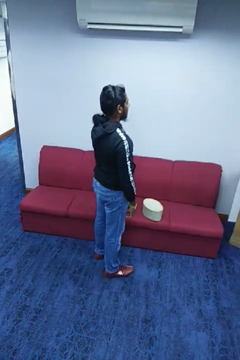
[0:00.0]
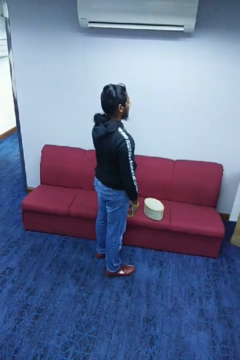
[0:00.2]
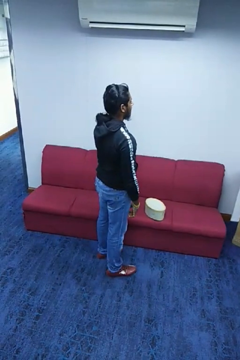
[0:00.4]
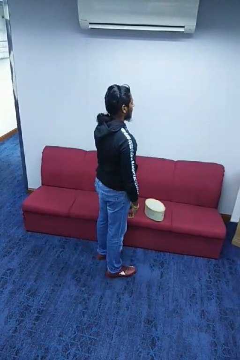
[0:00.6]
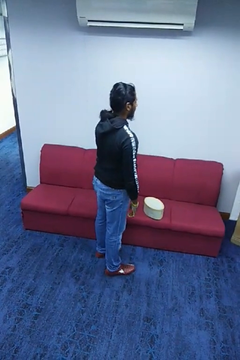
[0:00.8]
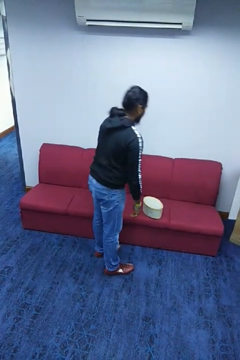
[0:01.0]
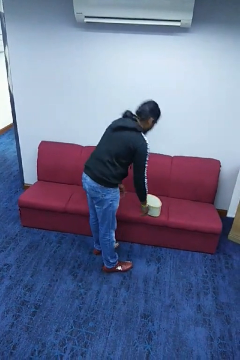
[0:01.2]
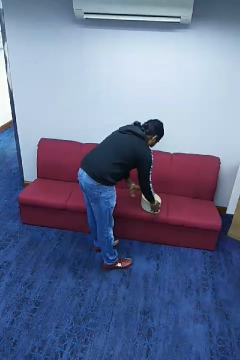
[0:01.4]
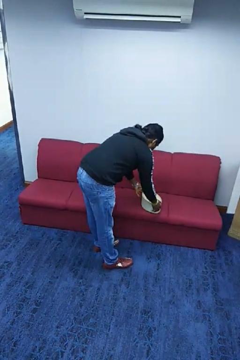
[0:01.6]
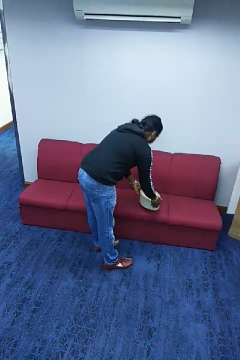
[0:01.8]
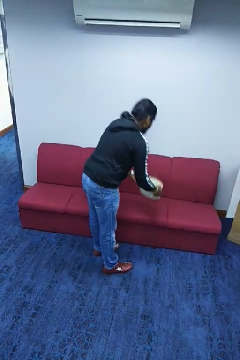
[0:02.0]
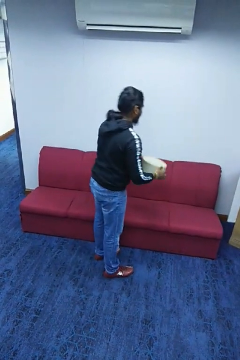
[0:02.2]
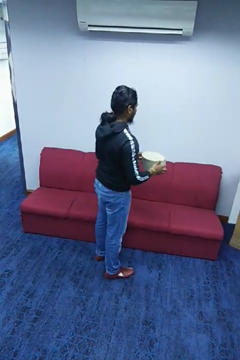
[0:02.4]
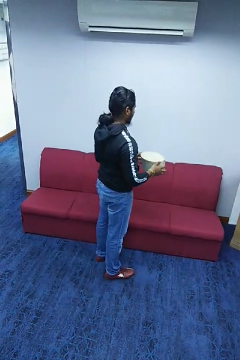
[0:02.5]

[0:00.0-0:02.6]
person picks up object from couch

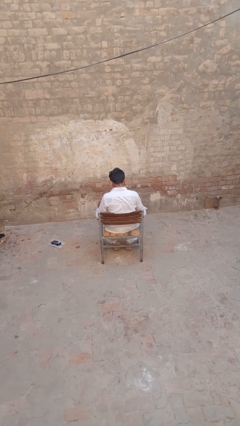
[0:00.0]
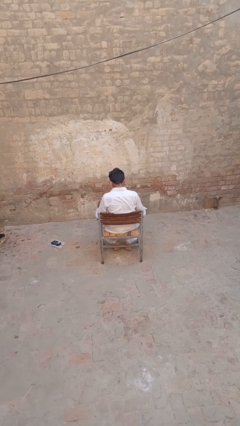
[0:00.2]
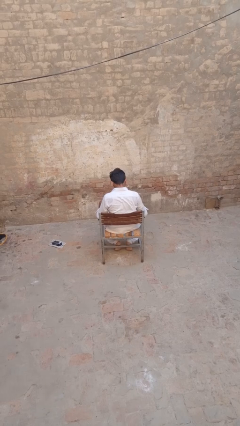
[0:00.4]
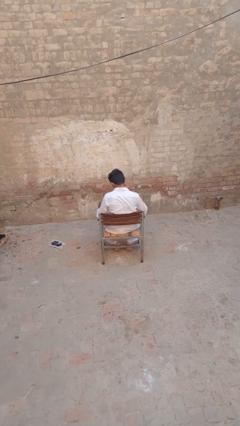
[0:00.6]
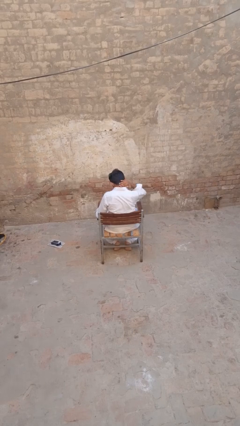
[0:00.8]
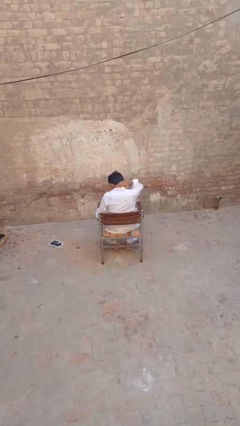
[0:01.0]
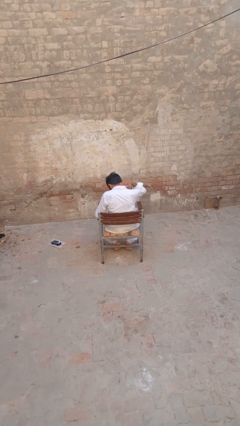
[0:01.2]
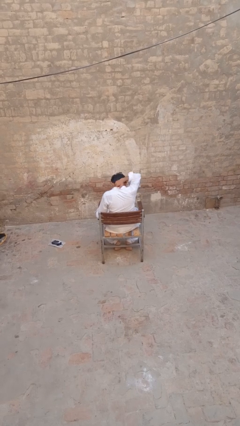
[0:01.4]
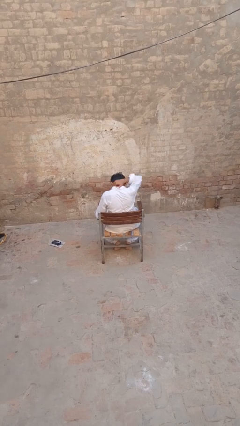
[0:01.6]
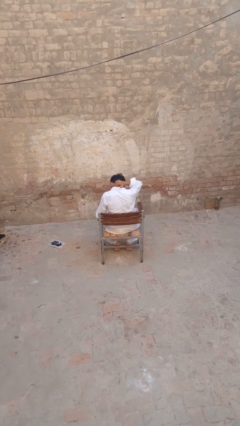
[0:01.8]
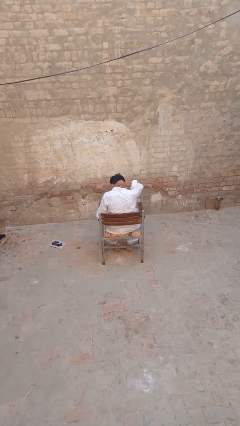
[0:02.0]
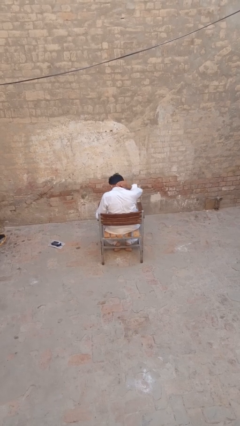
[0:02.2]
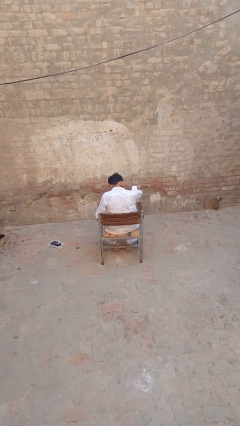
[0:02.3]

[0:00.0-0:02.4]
person rubs neck

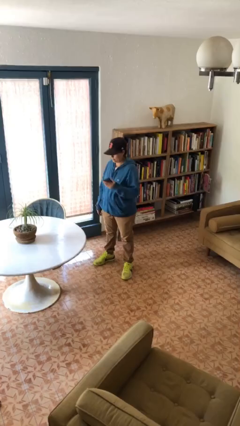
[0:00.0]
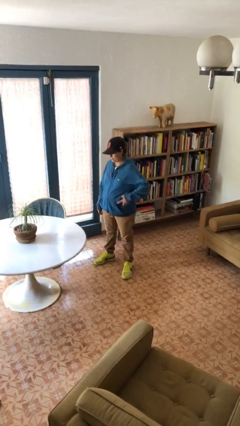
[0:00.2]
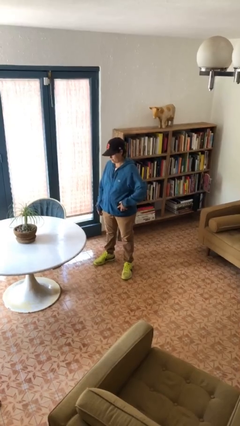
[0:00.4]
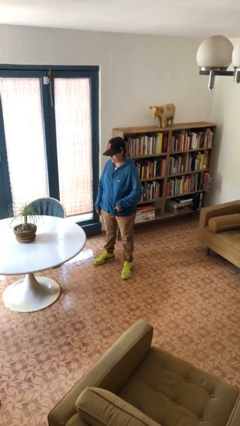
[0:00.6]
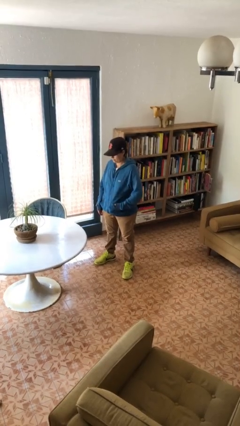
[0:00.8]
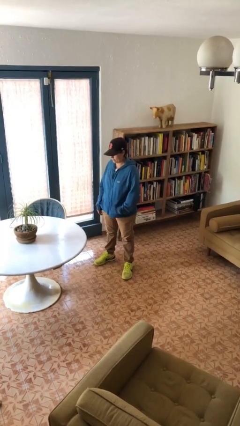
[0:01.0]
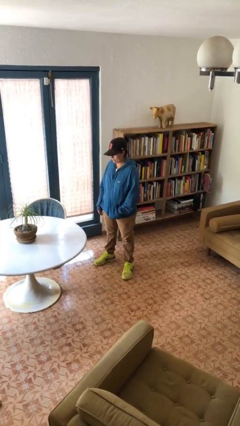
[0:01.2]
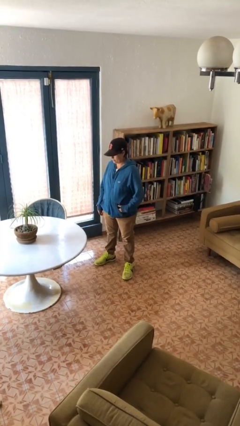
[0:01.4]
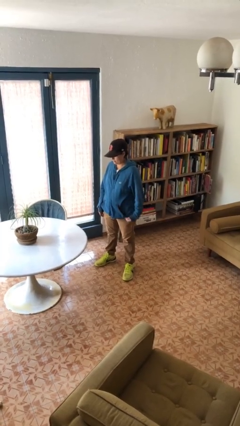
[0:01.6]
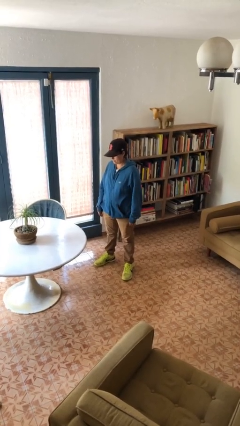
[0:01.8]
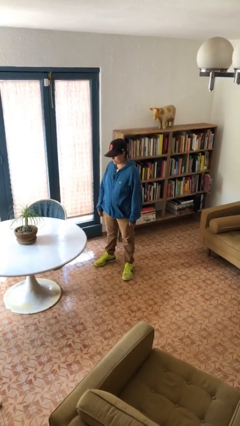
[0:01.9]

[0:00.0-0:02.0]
person puts phone into pocket

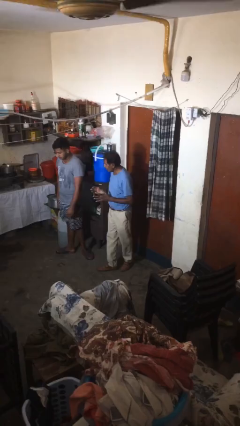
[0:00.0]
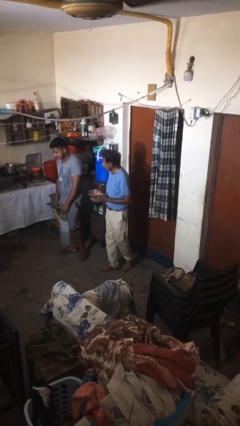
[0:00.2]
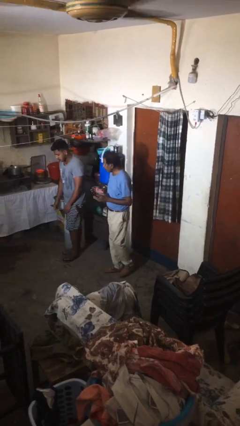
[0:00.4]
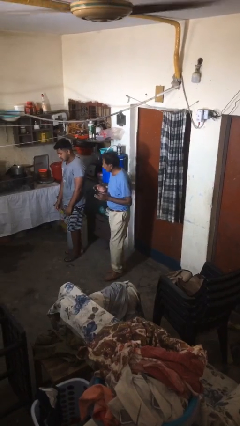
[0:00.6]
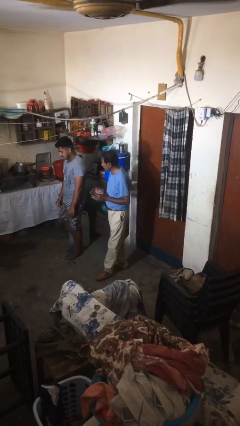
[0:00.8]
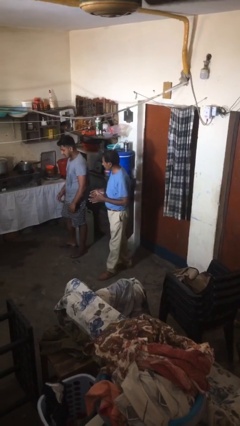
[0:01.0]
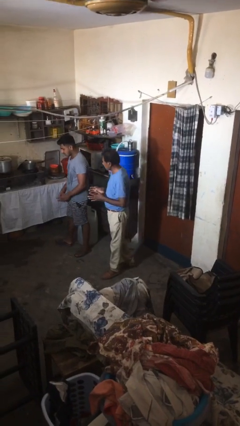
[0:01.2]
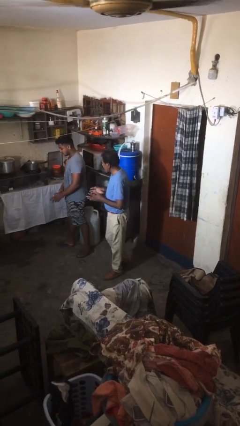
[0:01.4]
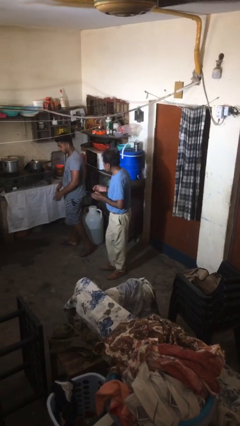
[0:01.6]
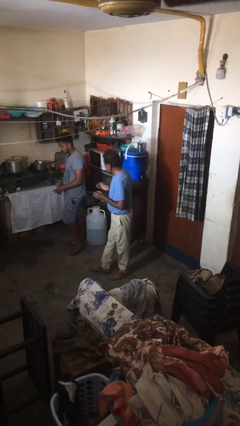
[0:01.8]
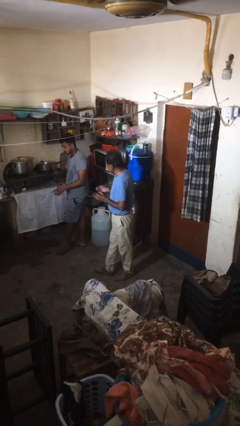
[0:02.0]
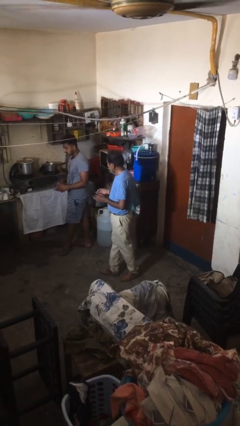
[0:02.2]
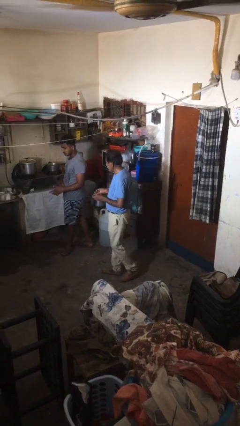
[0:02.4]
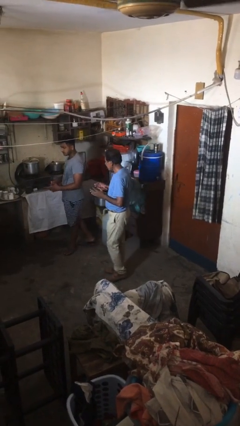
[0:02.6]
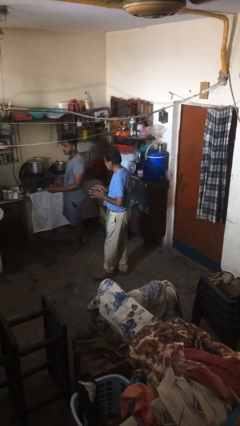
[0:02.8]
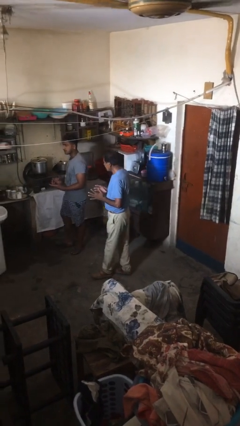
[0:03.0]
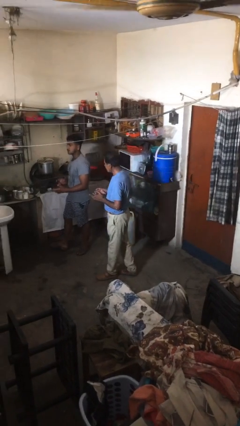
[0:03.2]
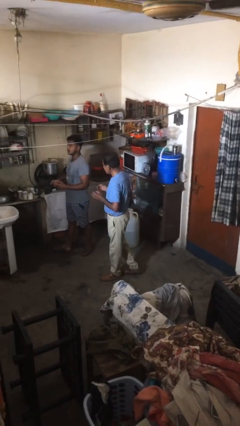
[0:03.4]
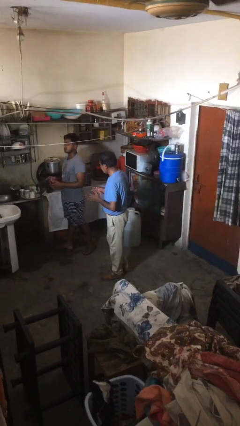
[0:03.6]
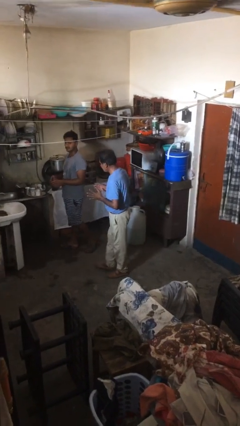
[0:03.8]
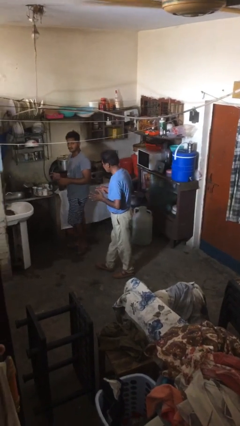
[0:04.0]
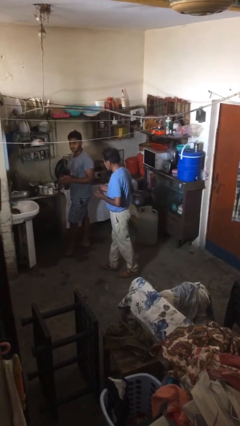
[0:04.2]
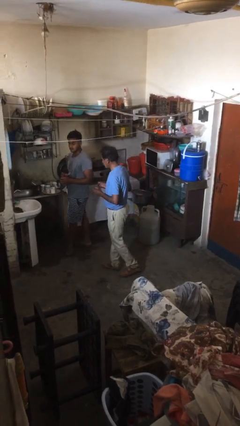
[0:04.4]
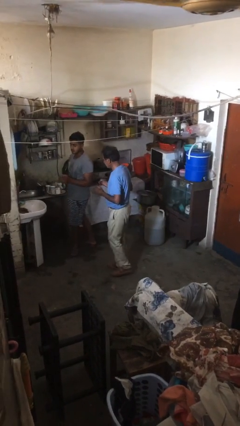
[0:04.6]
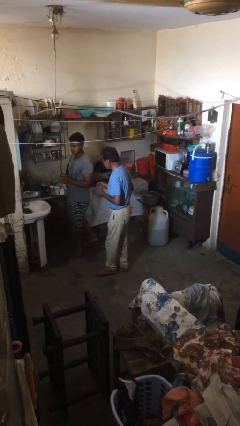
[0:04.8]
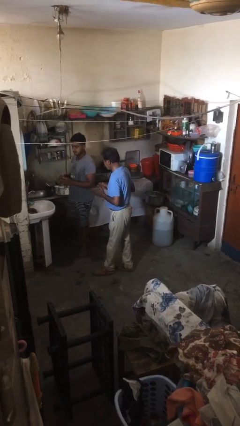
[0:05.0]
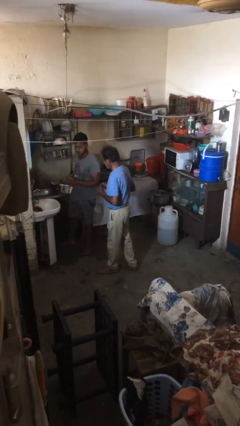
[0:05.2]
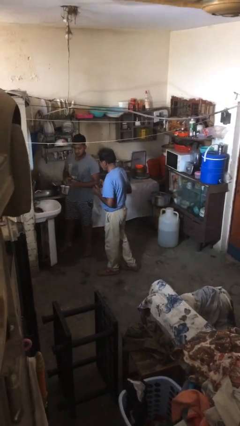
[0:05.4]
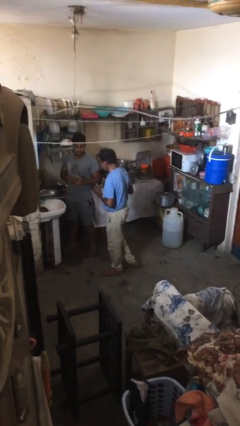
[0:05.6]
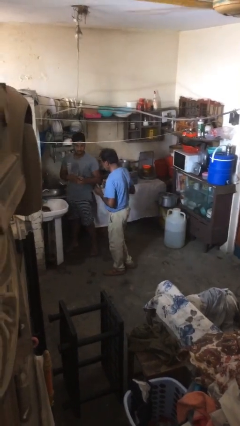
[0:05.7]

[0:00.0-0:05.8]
person talks to person

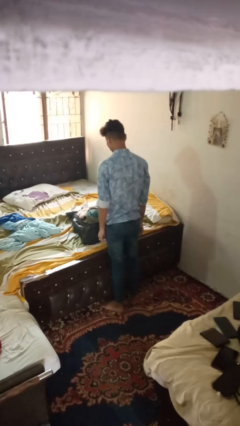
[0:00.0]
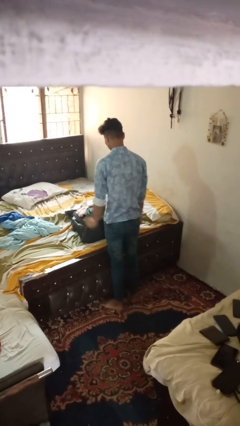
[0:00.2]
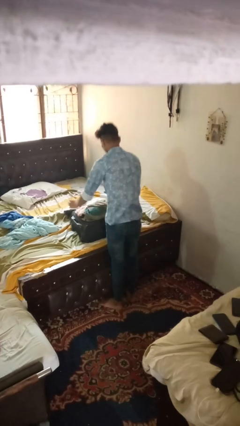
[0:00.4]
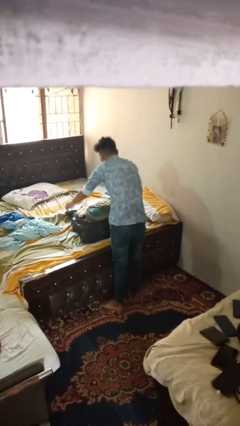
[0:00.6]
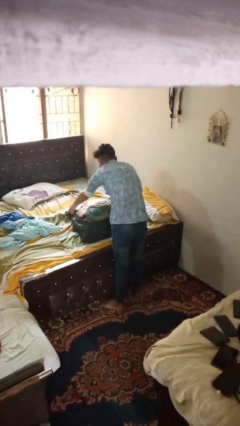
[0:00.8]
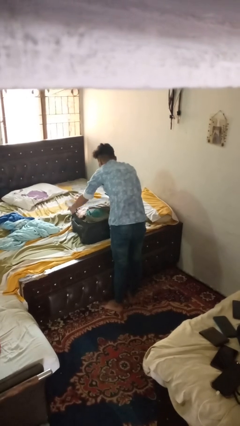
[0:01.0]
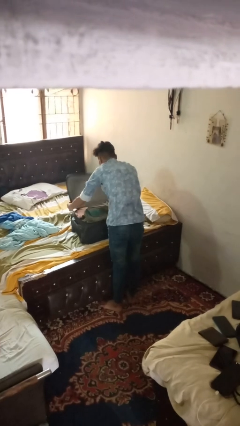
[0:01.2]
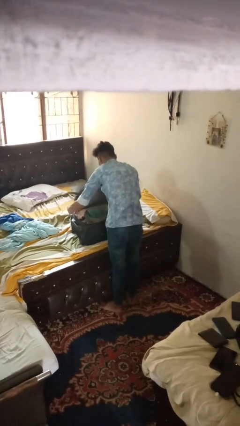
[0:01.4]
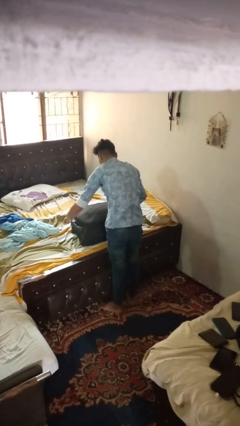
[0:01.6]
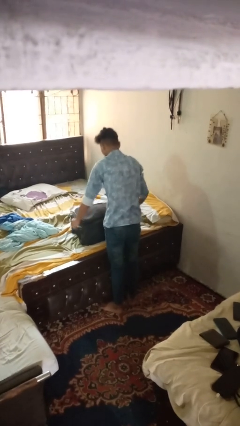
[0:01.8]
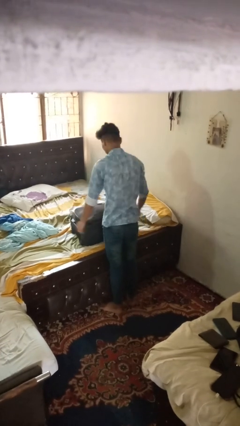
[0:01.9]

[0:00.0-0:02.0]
person closes suitcase

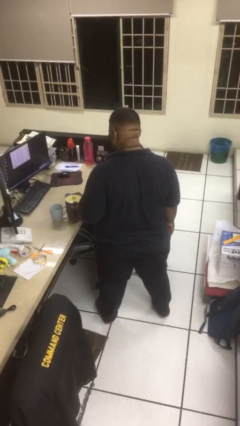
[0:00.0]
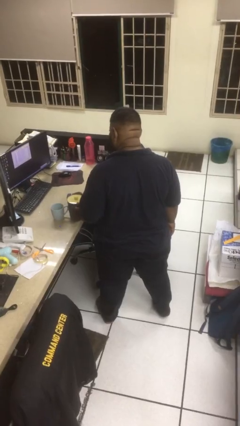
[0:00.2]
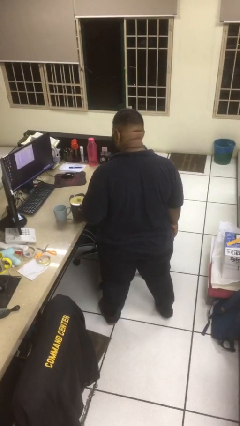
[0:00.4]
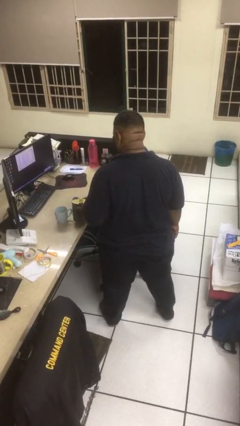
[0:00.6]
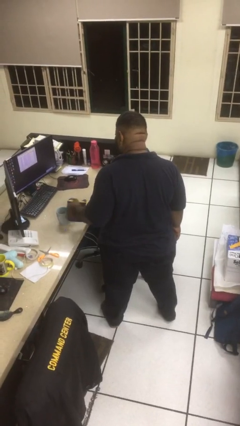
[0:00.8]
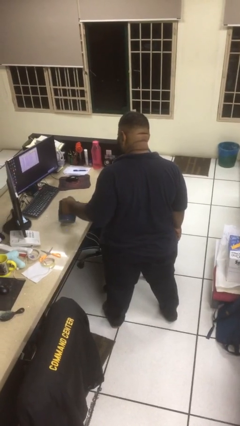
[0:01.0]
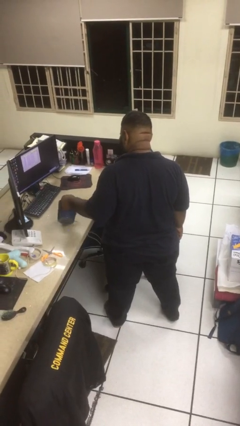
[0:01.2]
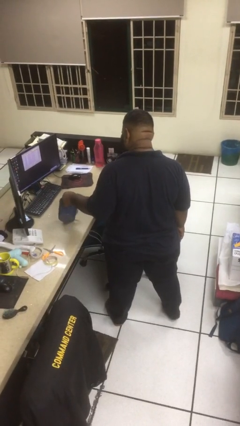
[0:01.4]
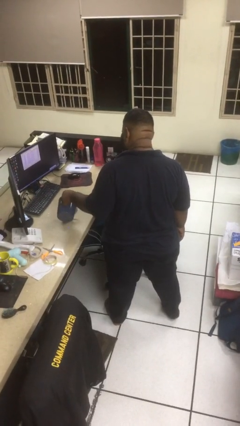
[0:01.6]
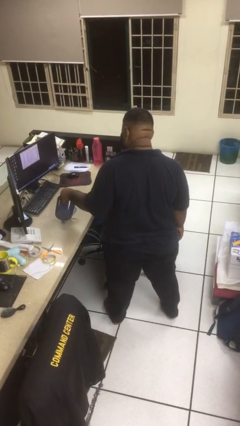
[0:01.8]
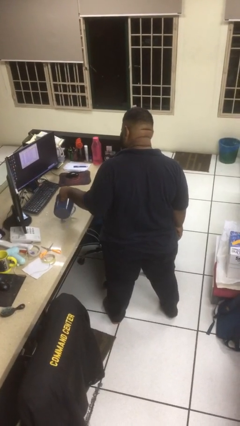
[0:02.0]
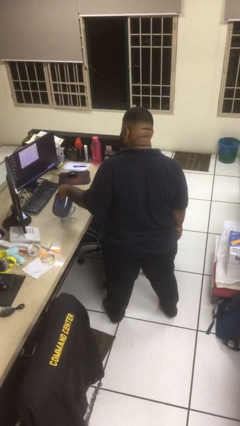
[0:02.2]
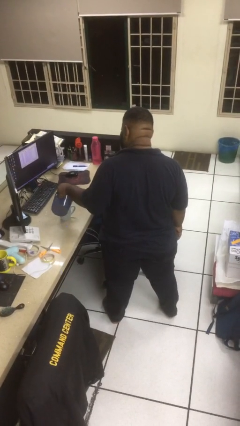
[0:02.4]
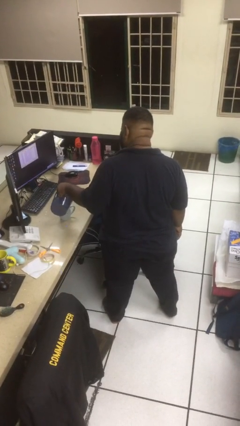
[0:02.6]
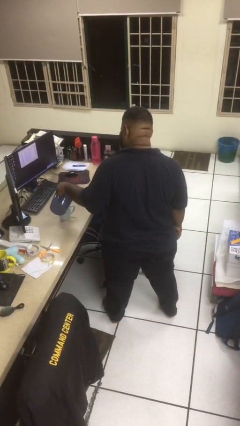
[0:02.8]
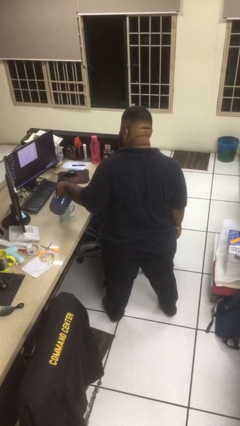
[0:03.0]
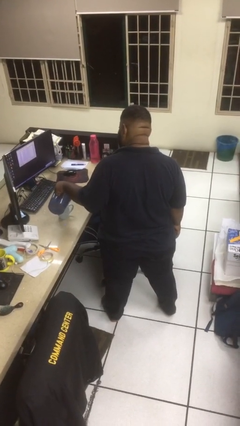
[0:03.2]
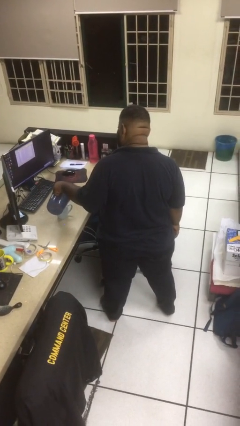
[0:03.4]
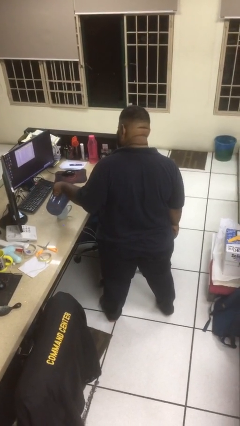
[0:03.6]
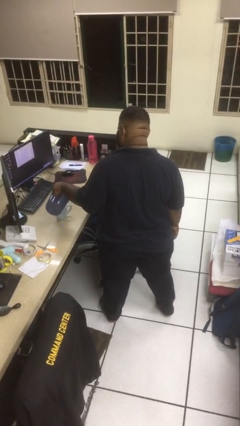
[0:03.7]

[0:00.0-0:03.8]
person pours coffee into mug
